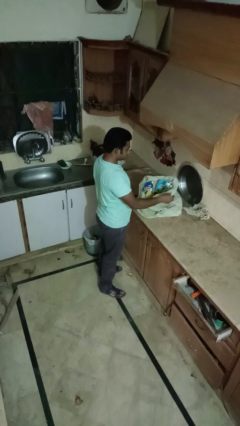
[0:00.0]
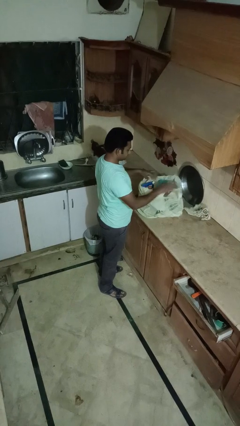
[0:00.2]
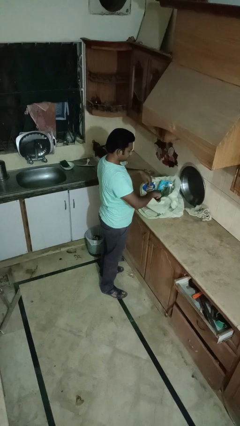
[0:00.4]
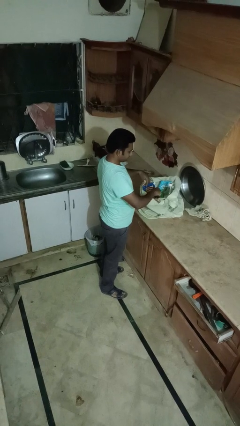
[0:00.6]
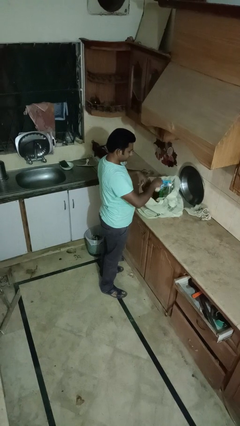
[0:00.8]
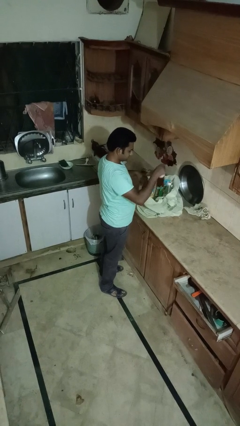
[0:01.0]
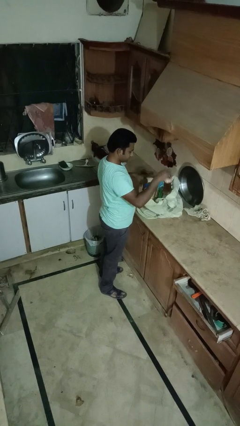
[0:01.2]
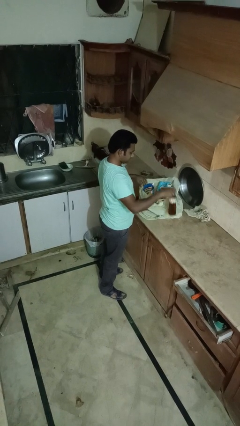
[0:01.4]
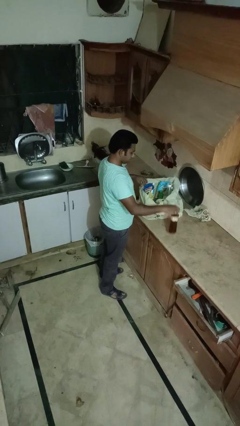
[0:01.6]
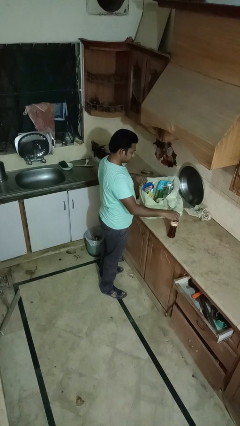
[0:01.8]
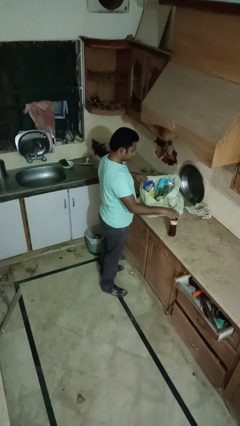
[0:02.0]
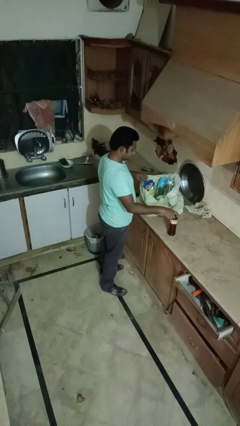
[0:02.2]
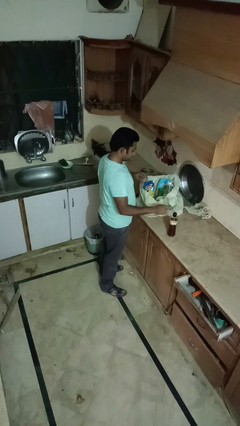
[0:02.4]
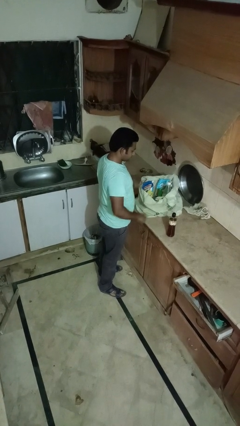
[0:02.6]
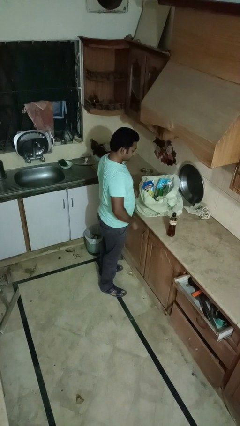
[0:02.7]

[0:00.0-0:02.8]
person takes object from bag

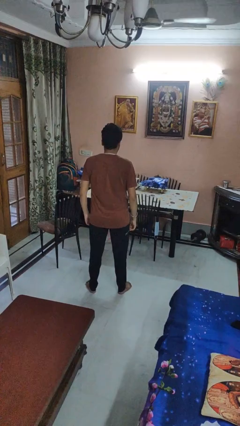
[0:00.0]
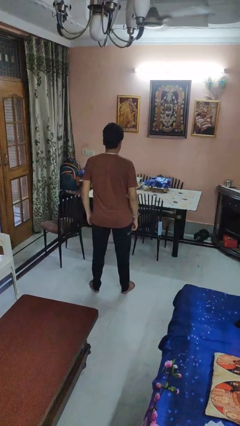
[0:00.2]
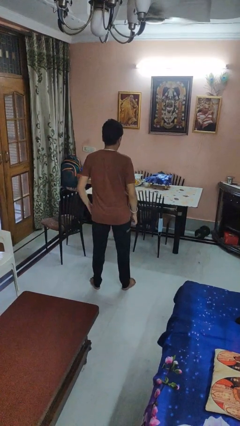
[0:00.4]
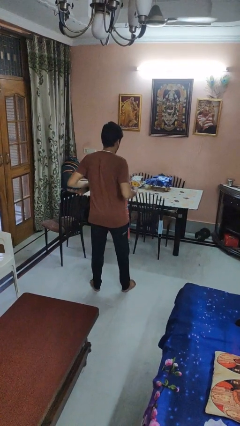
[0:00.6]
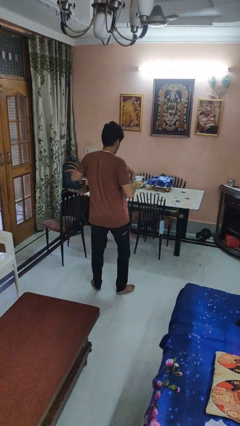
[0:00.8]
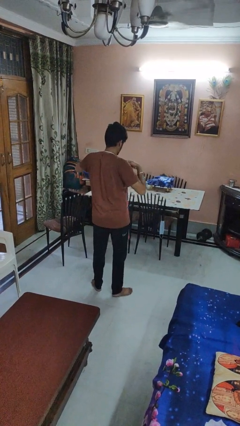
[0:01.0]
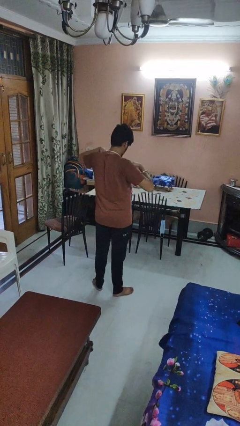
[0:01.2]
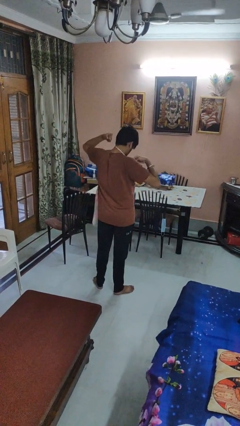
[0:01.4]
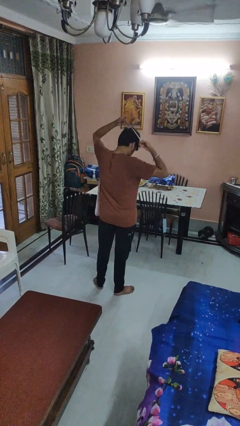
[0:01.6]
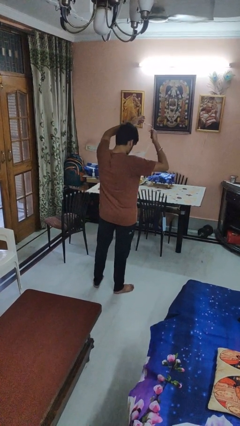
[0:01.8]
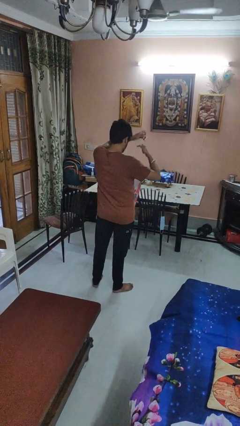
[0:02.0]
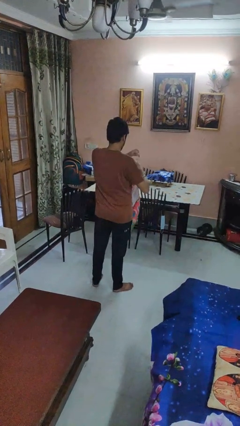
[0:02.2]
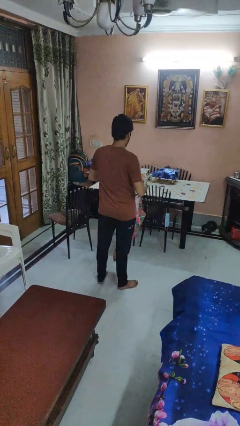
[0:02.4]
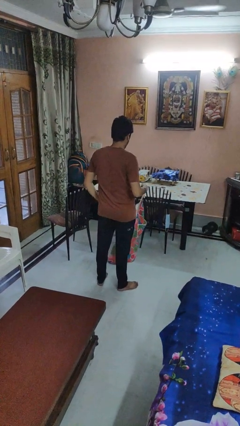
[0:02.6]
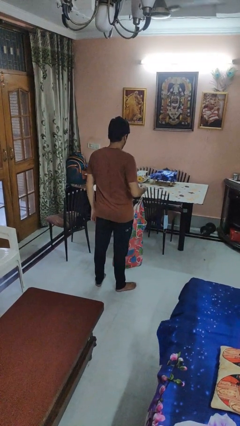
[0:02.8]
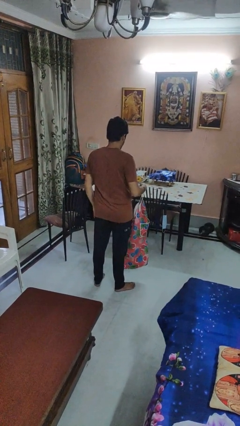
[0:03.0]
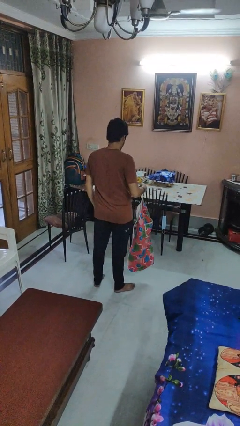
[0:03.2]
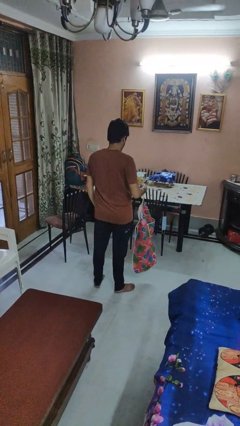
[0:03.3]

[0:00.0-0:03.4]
person takes off apron

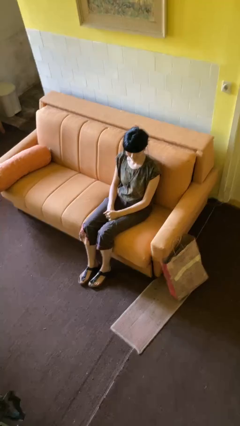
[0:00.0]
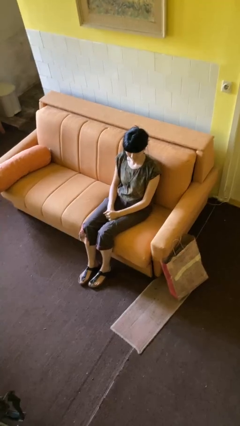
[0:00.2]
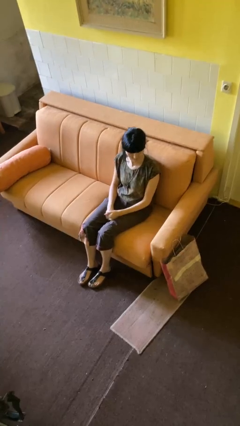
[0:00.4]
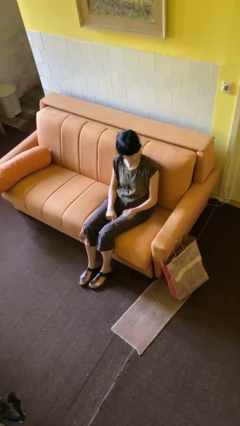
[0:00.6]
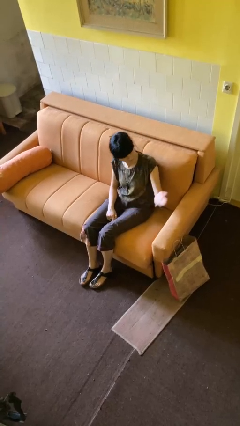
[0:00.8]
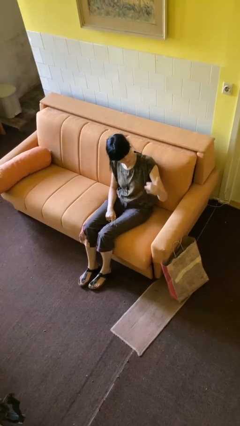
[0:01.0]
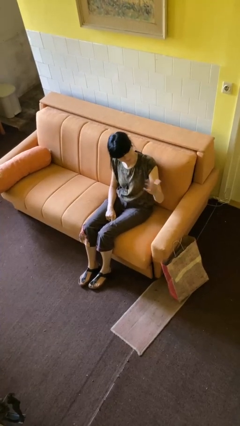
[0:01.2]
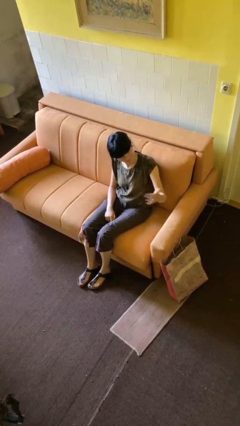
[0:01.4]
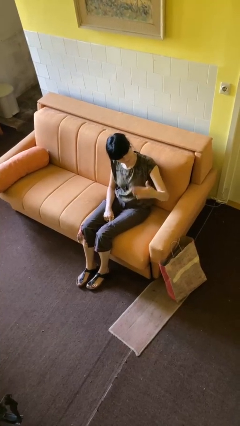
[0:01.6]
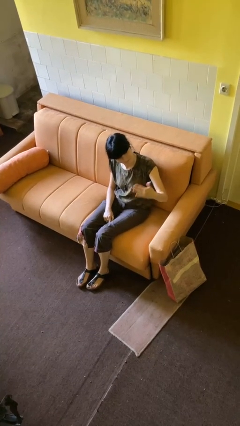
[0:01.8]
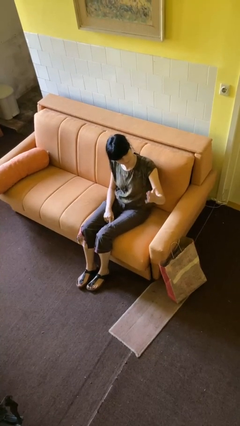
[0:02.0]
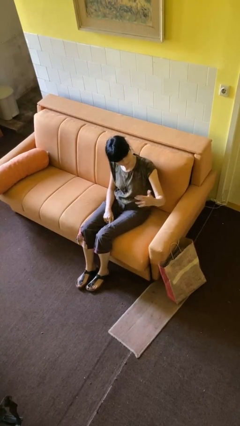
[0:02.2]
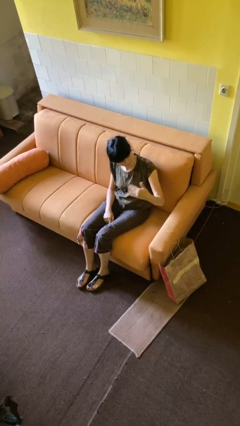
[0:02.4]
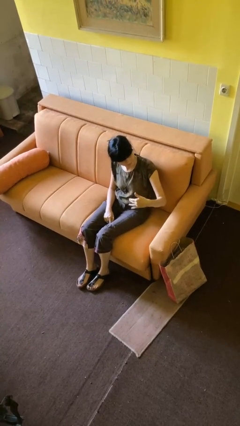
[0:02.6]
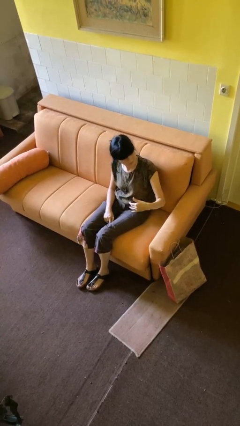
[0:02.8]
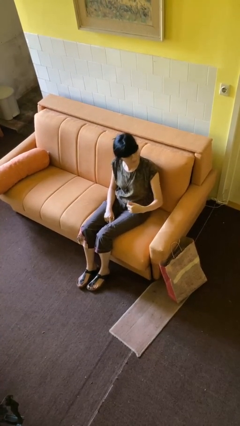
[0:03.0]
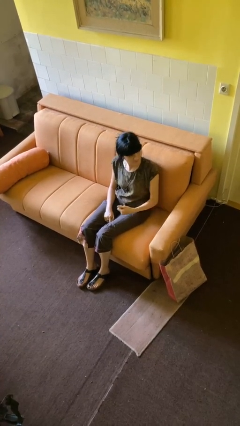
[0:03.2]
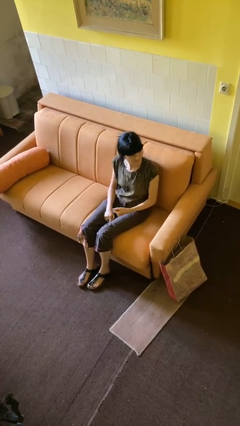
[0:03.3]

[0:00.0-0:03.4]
person gestures come here

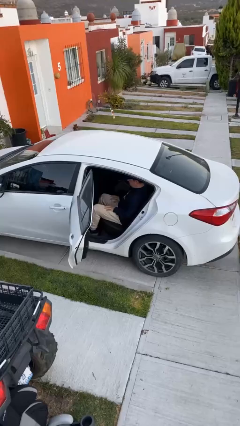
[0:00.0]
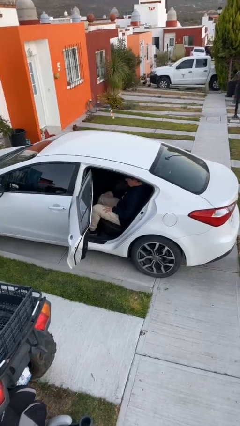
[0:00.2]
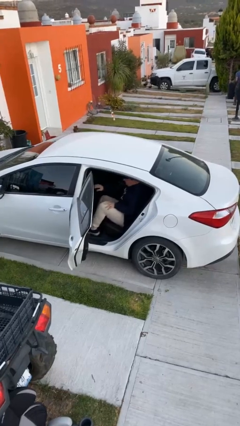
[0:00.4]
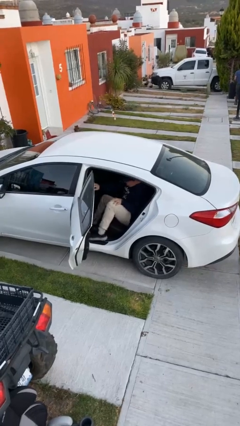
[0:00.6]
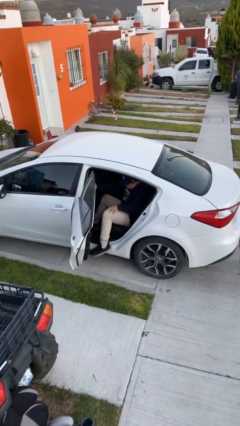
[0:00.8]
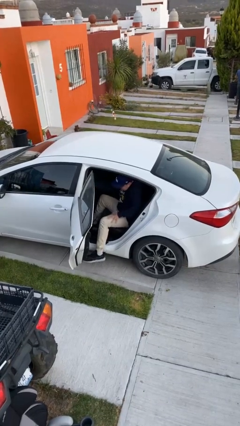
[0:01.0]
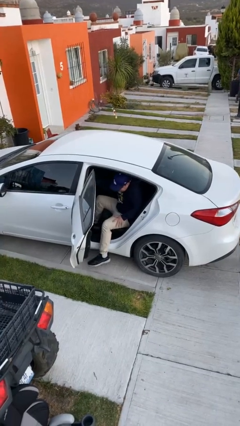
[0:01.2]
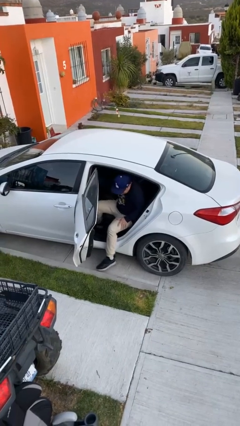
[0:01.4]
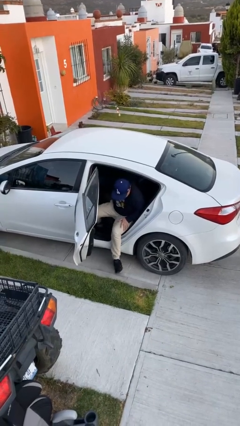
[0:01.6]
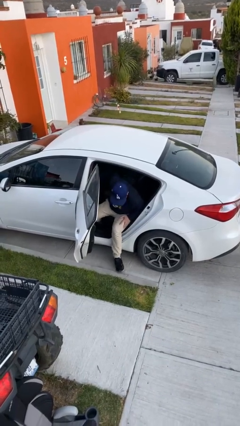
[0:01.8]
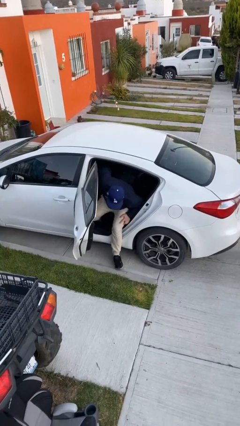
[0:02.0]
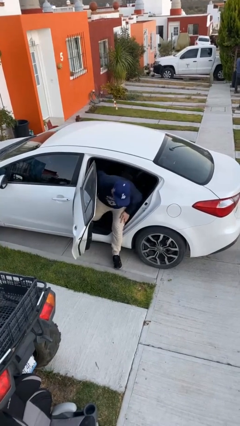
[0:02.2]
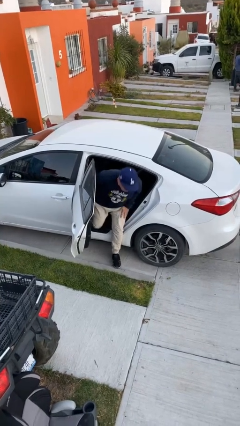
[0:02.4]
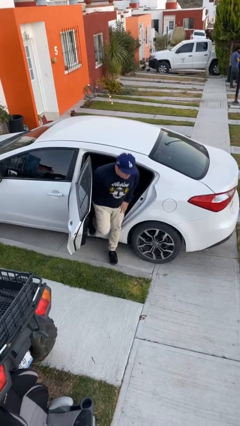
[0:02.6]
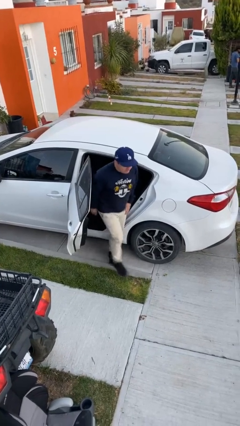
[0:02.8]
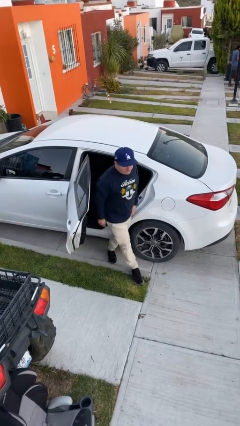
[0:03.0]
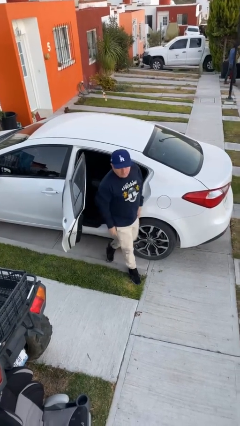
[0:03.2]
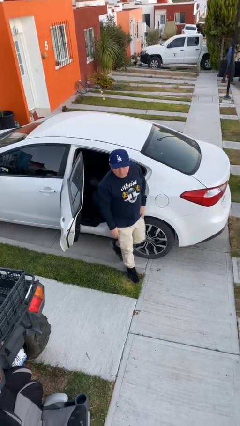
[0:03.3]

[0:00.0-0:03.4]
person exits car

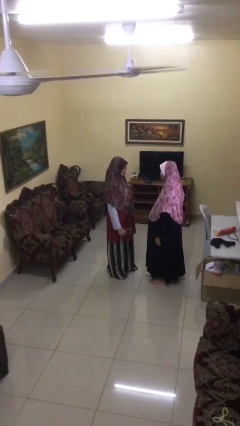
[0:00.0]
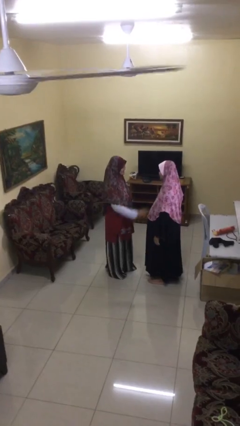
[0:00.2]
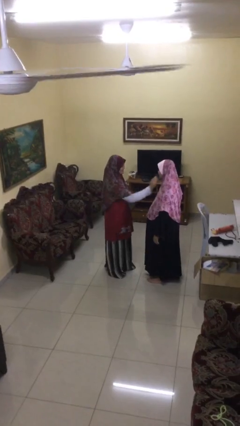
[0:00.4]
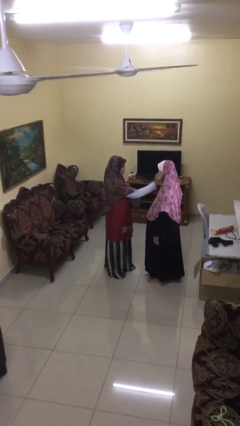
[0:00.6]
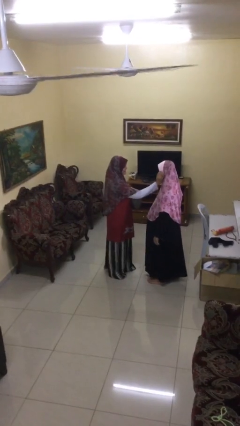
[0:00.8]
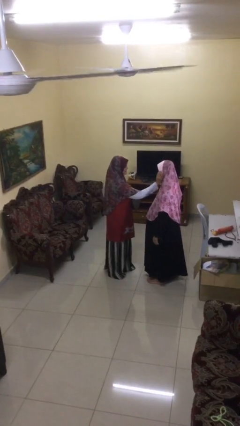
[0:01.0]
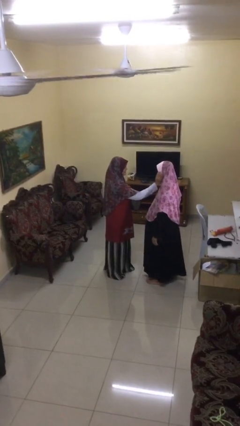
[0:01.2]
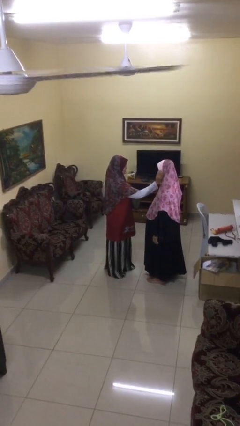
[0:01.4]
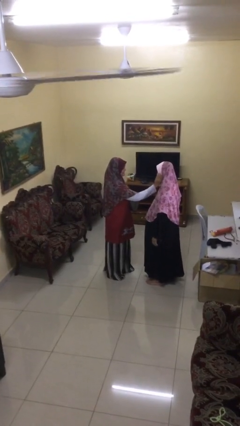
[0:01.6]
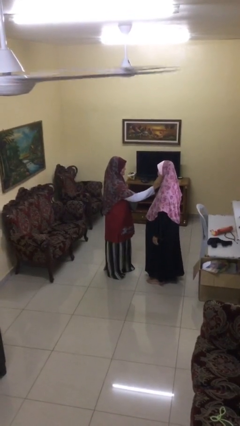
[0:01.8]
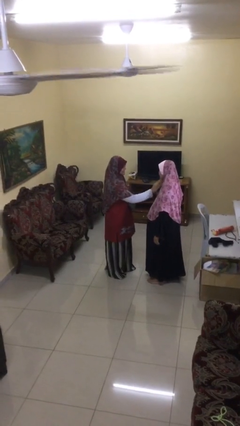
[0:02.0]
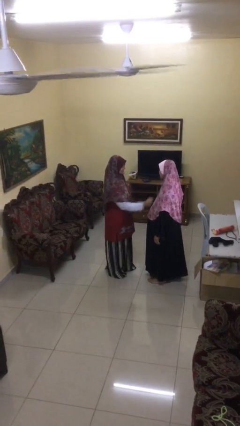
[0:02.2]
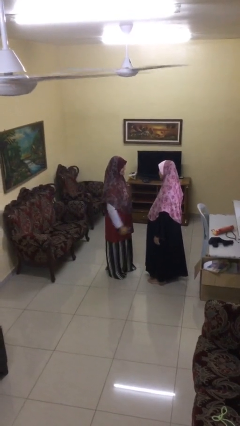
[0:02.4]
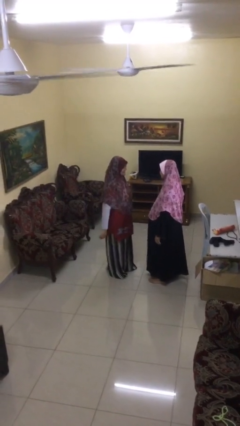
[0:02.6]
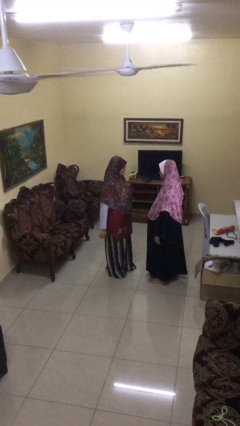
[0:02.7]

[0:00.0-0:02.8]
person touches face of person

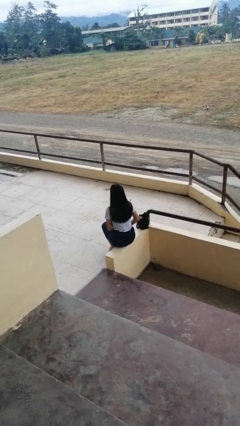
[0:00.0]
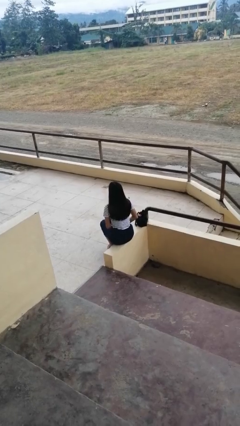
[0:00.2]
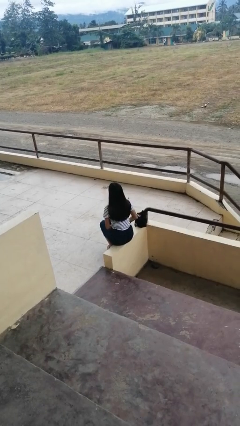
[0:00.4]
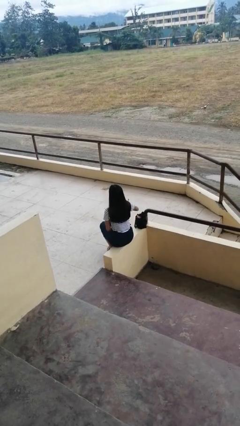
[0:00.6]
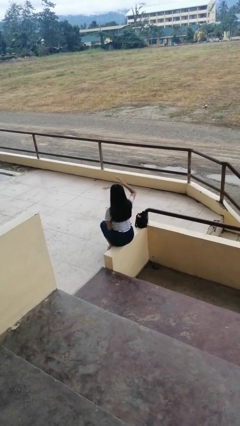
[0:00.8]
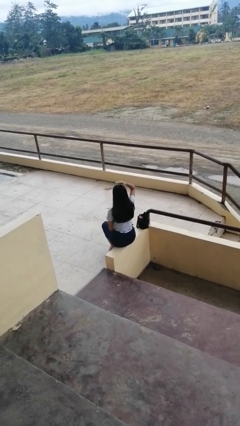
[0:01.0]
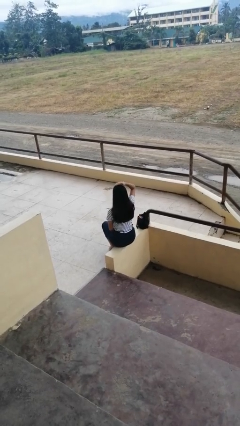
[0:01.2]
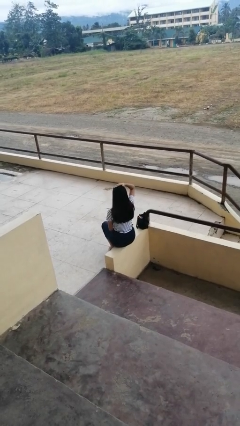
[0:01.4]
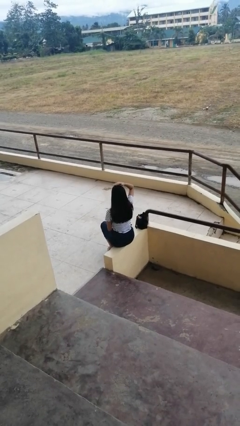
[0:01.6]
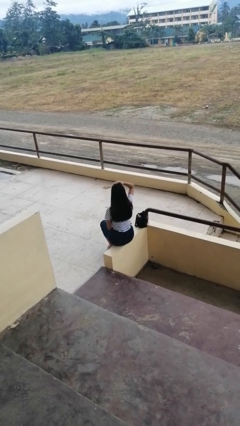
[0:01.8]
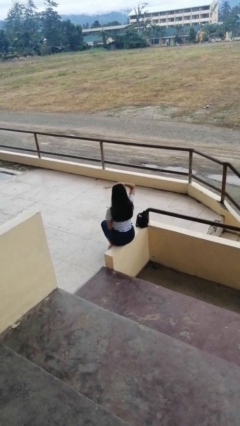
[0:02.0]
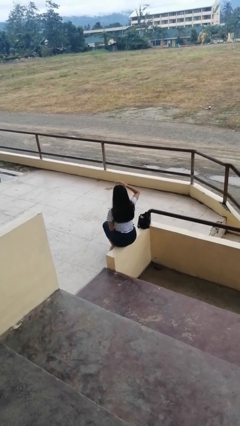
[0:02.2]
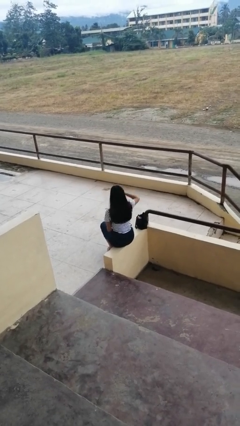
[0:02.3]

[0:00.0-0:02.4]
person pats head
